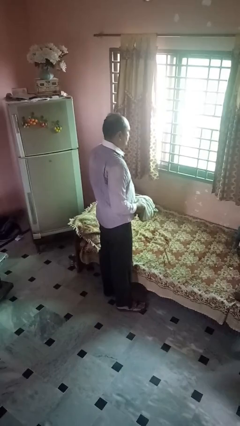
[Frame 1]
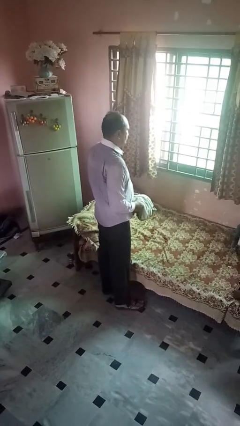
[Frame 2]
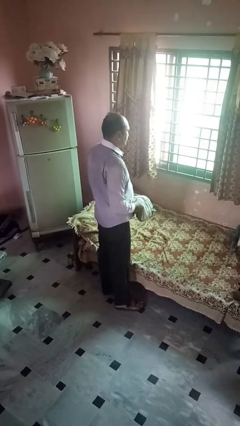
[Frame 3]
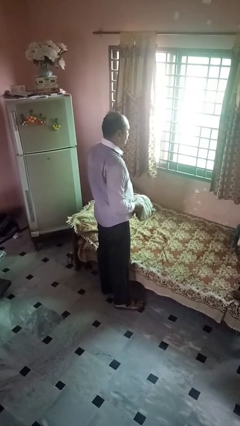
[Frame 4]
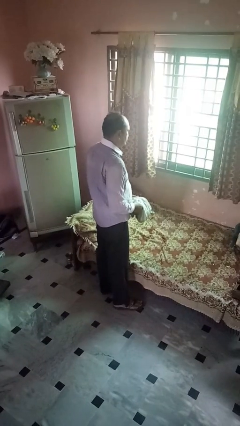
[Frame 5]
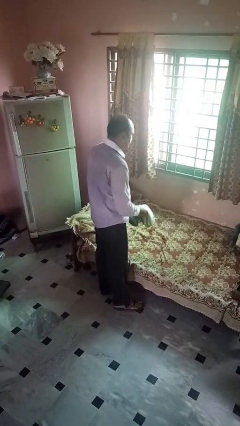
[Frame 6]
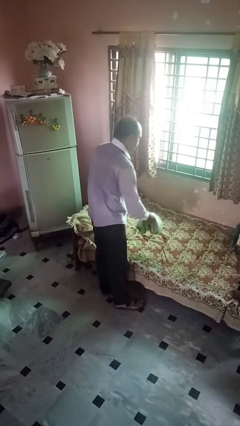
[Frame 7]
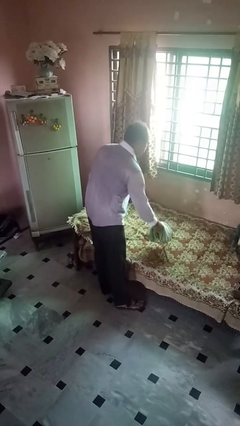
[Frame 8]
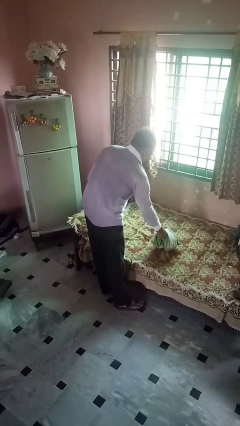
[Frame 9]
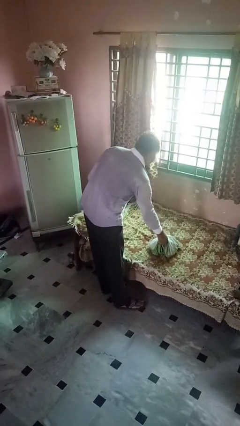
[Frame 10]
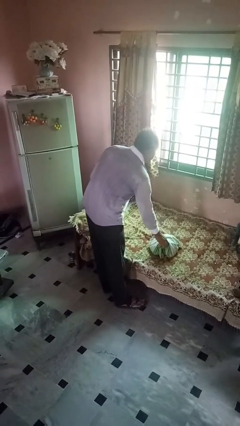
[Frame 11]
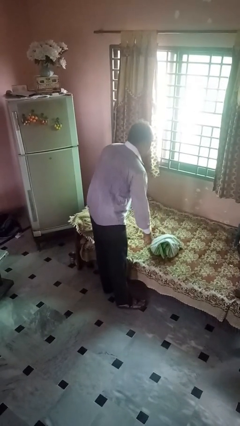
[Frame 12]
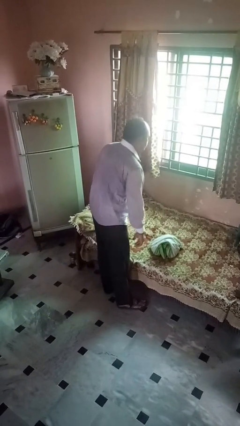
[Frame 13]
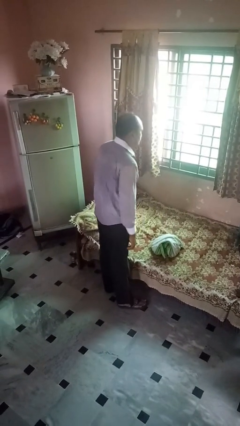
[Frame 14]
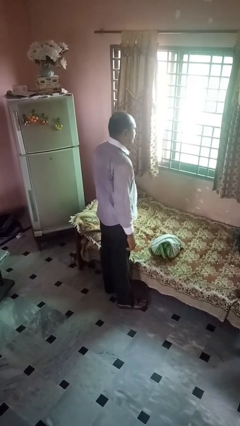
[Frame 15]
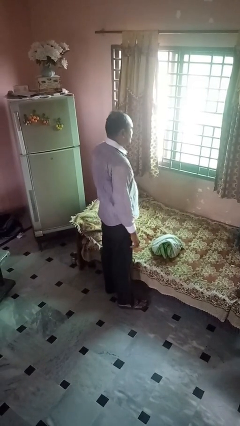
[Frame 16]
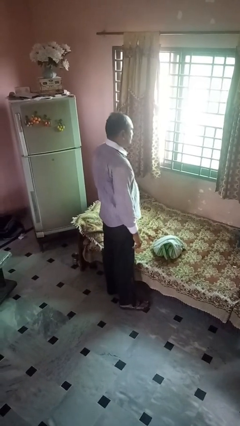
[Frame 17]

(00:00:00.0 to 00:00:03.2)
person puts down object on bed

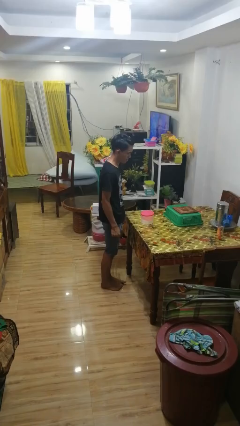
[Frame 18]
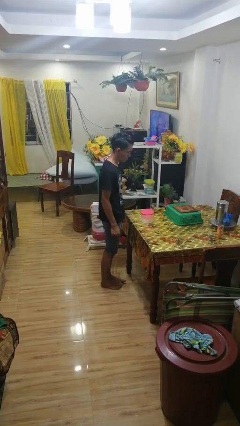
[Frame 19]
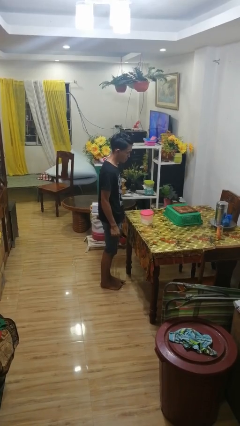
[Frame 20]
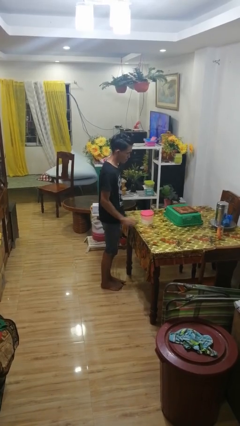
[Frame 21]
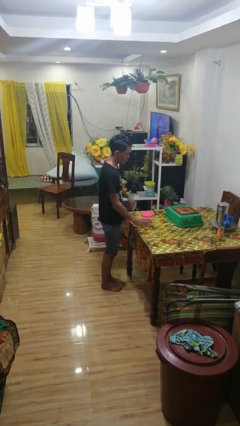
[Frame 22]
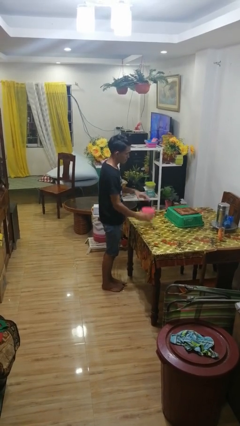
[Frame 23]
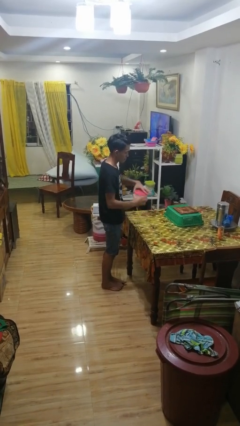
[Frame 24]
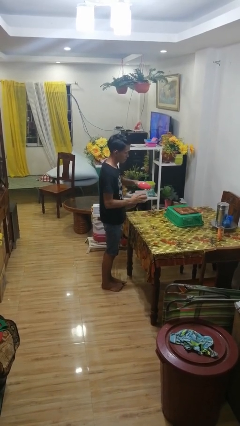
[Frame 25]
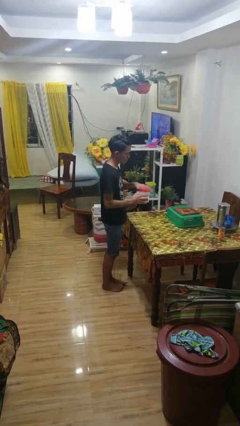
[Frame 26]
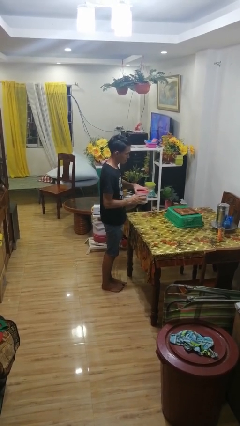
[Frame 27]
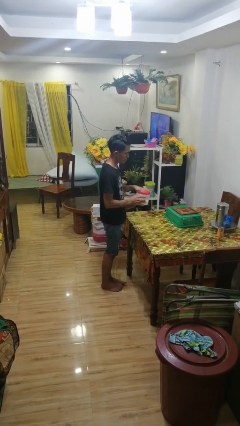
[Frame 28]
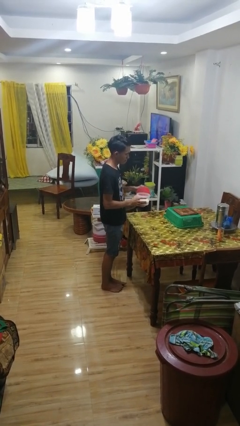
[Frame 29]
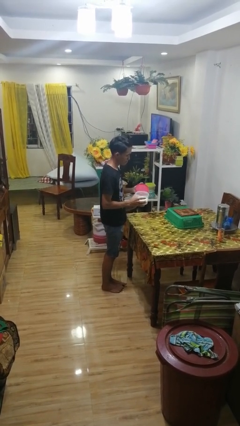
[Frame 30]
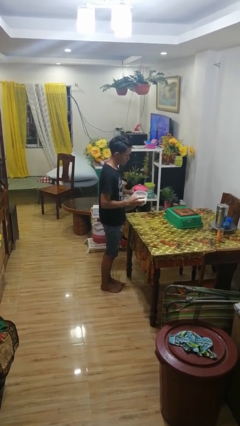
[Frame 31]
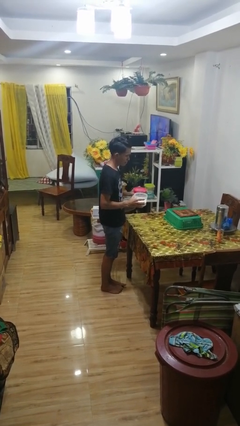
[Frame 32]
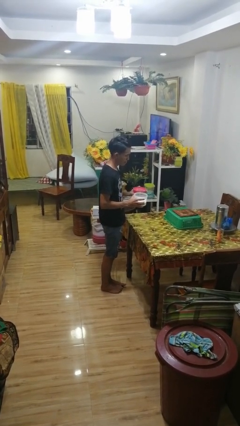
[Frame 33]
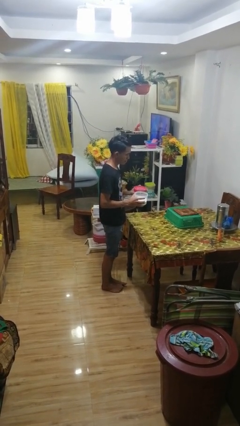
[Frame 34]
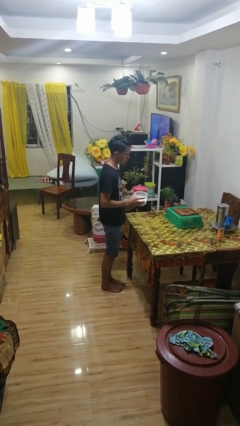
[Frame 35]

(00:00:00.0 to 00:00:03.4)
person opens jar

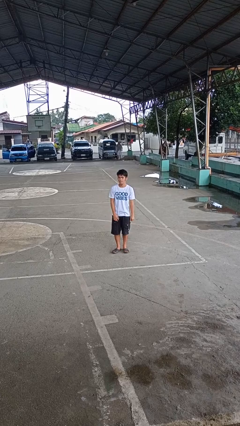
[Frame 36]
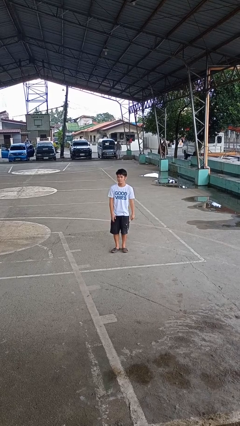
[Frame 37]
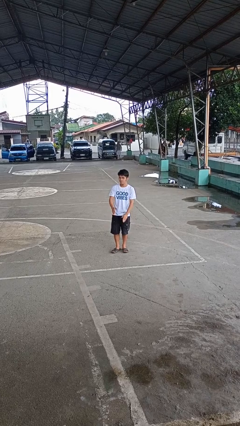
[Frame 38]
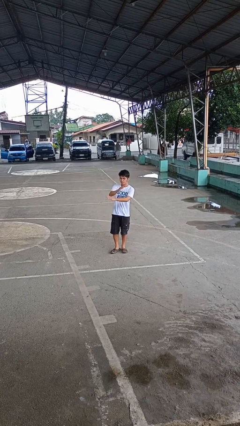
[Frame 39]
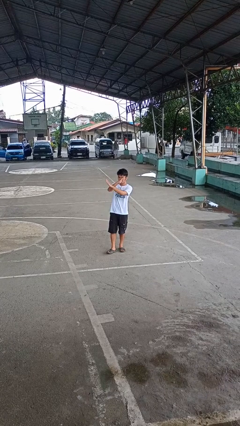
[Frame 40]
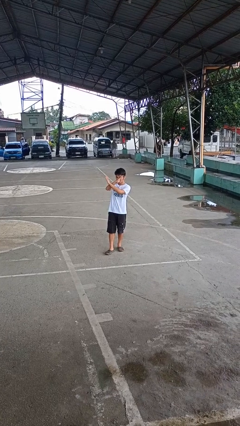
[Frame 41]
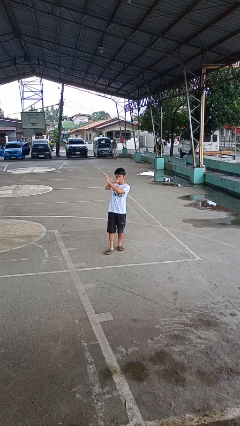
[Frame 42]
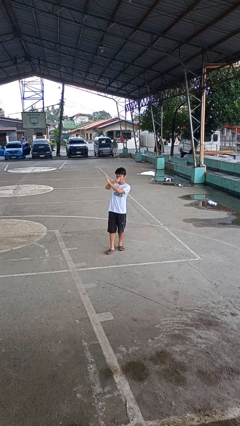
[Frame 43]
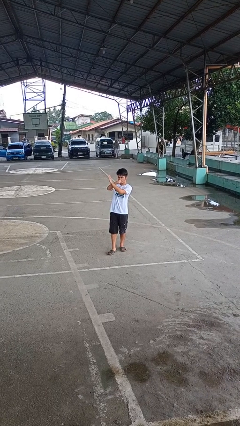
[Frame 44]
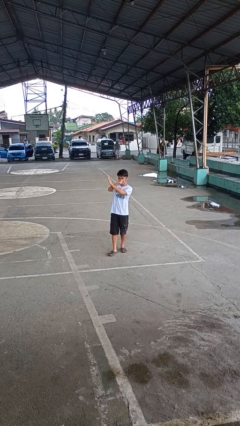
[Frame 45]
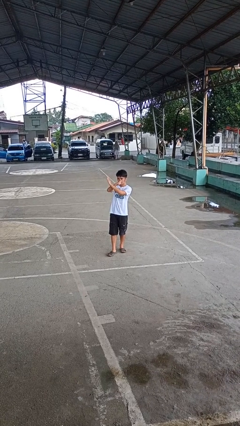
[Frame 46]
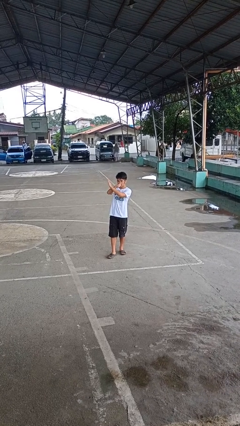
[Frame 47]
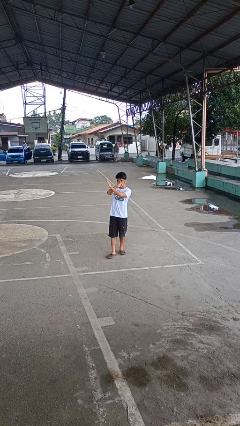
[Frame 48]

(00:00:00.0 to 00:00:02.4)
person gestures arms x

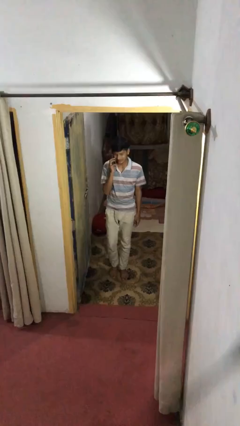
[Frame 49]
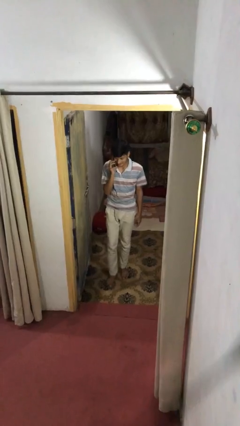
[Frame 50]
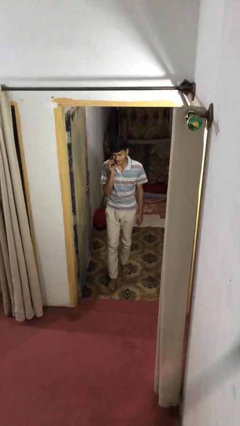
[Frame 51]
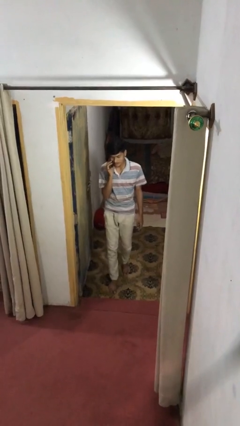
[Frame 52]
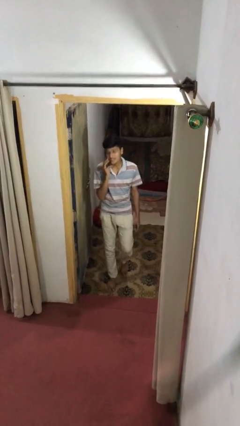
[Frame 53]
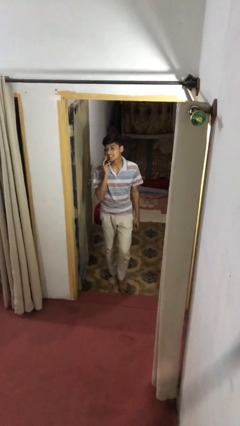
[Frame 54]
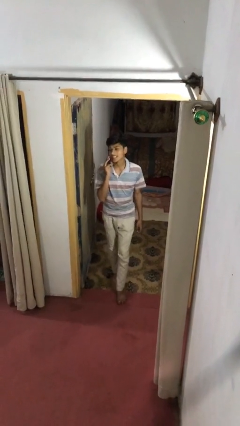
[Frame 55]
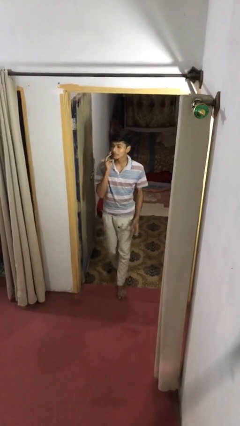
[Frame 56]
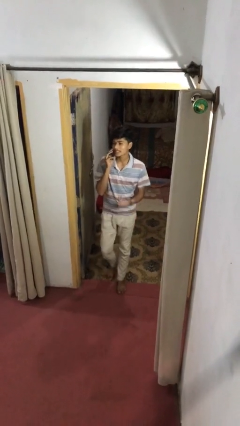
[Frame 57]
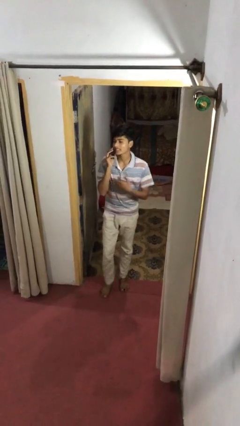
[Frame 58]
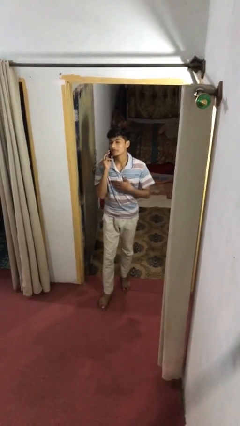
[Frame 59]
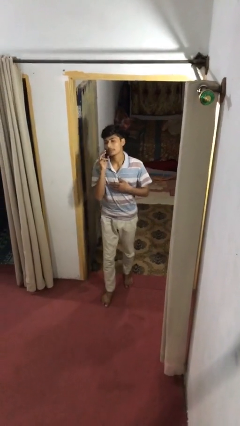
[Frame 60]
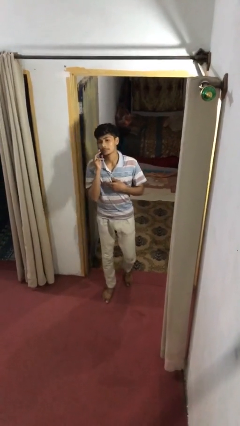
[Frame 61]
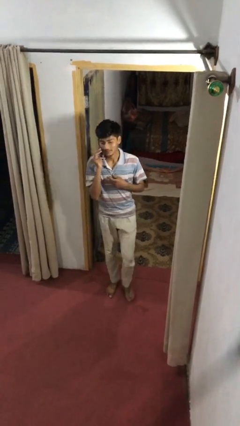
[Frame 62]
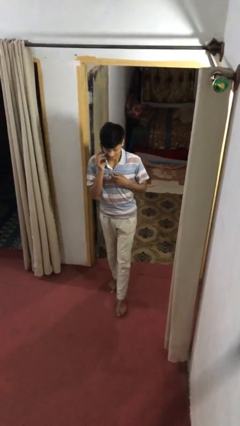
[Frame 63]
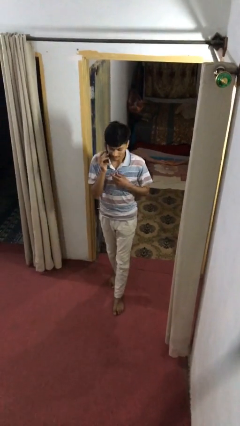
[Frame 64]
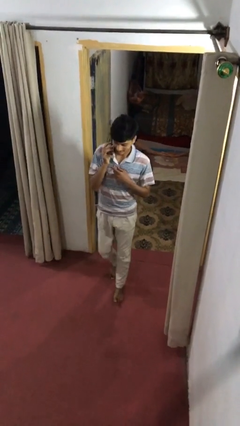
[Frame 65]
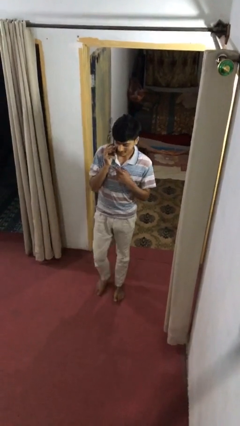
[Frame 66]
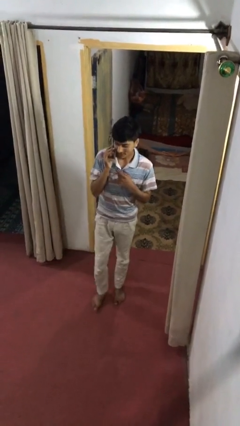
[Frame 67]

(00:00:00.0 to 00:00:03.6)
person enters scene through structure

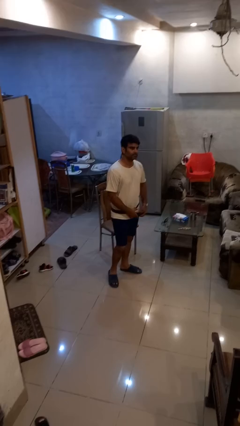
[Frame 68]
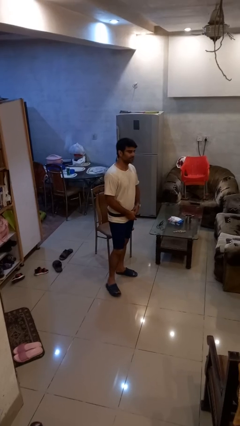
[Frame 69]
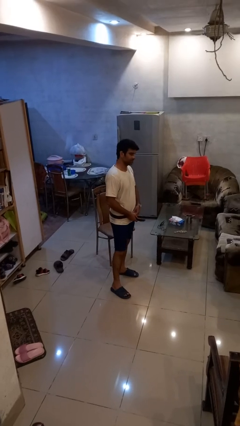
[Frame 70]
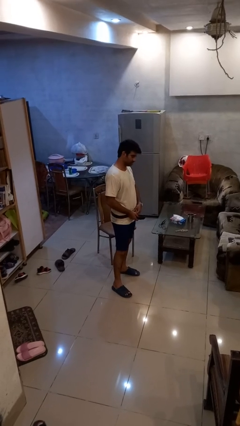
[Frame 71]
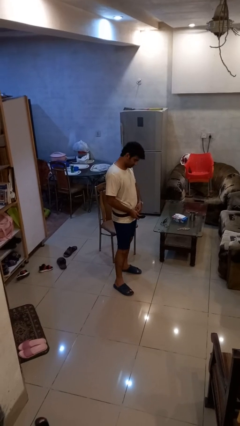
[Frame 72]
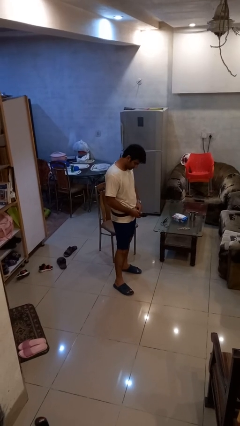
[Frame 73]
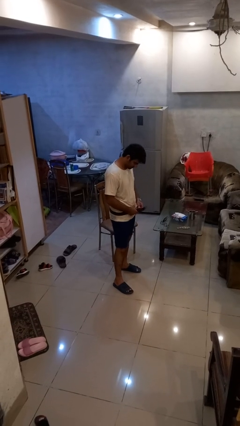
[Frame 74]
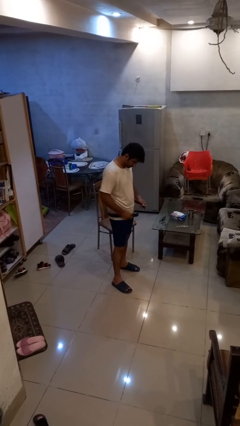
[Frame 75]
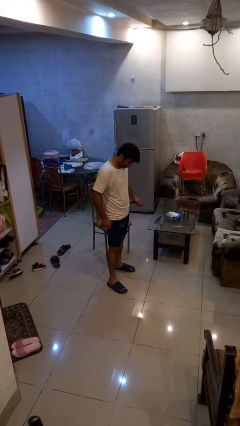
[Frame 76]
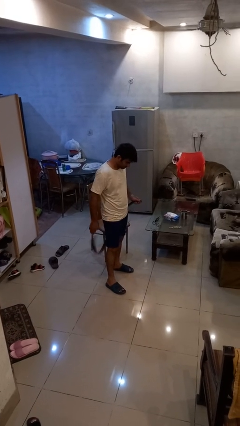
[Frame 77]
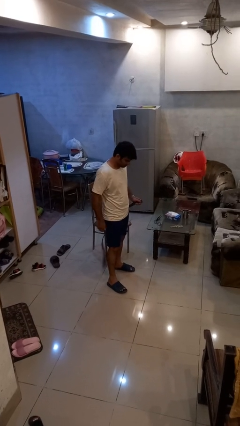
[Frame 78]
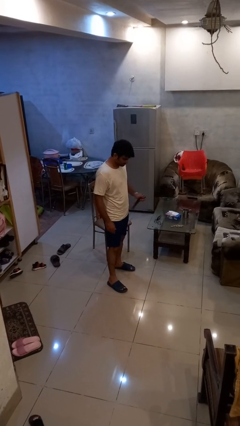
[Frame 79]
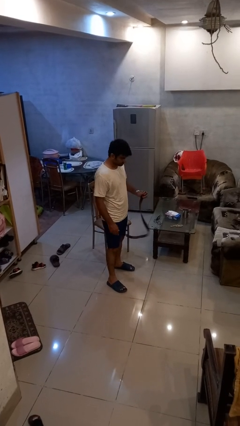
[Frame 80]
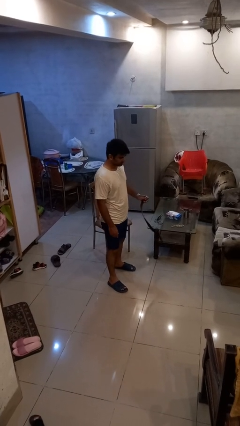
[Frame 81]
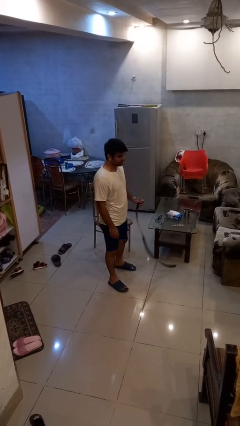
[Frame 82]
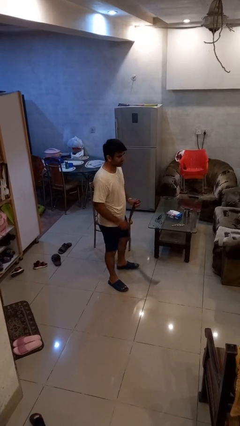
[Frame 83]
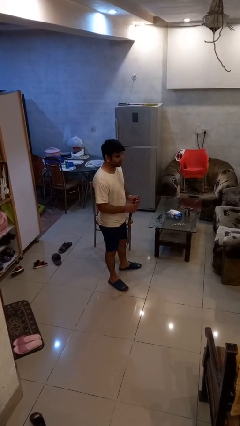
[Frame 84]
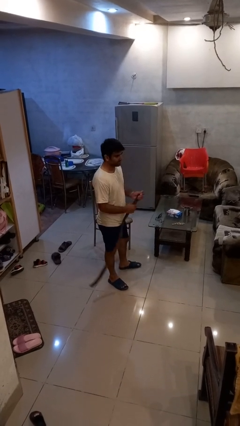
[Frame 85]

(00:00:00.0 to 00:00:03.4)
person takes off belt

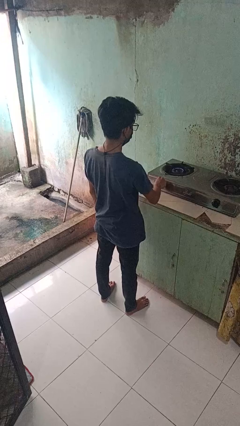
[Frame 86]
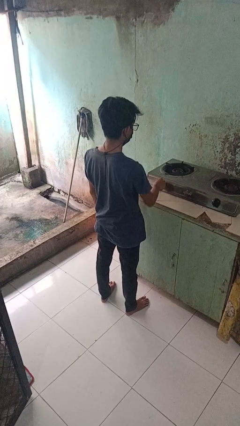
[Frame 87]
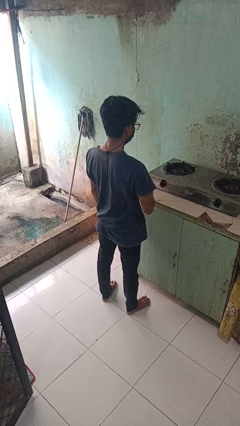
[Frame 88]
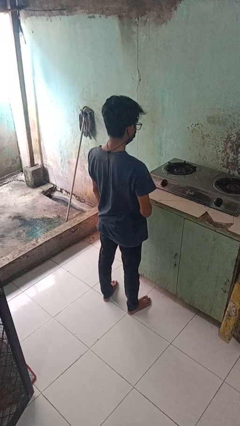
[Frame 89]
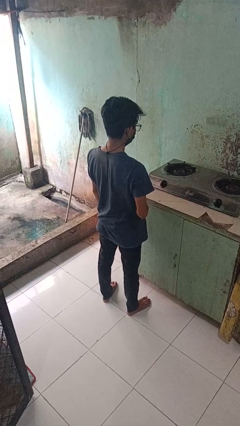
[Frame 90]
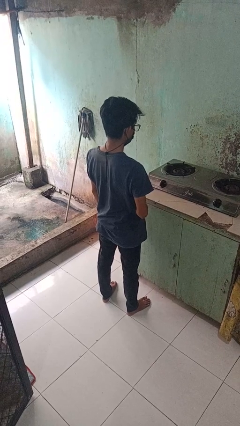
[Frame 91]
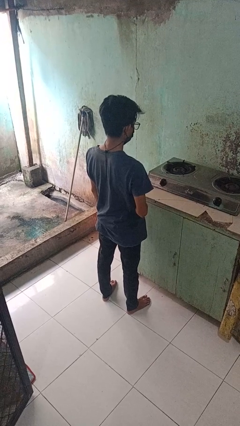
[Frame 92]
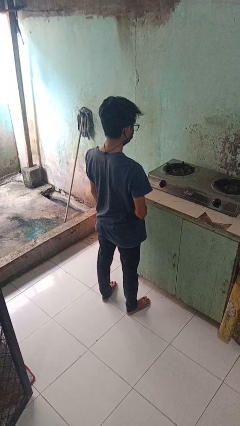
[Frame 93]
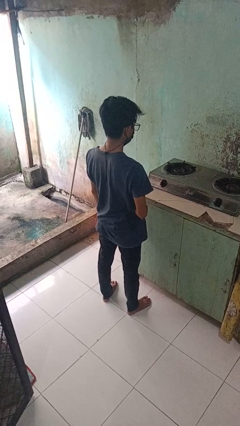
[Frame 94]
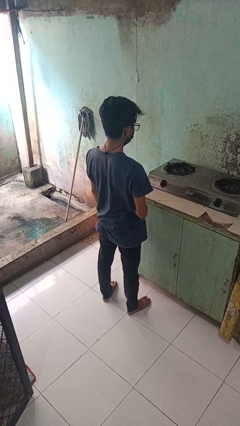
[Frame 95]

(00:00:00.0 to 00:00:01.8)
person turns off stovetop
